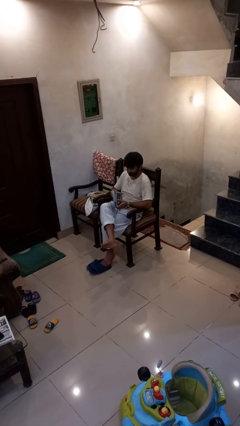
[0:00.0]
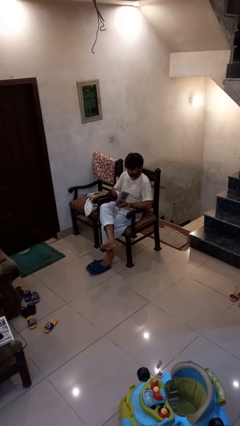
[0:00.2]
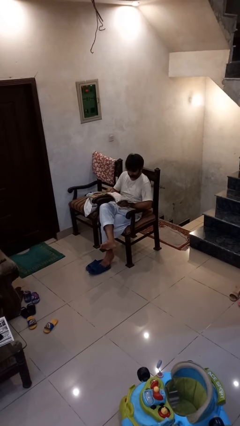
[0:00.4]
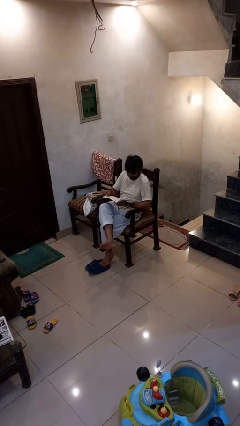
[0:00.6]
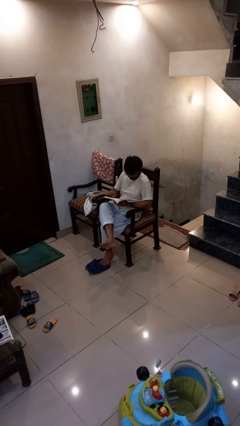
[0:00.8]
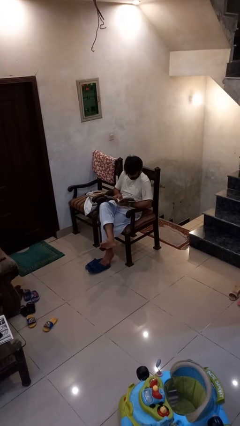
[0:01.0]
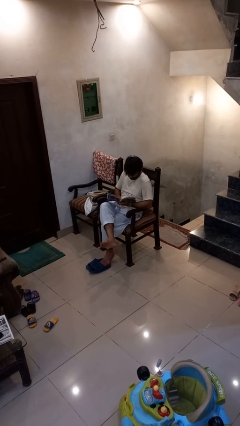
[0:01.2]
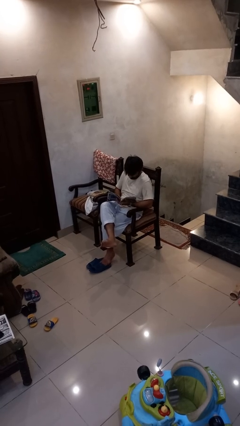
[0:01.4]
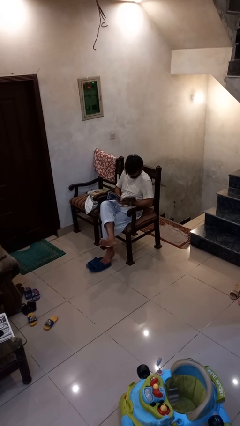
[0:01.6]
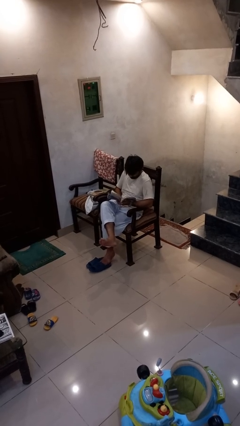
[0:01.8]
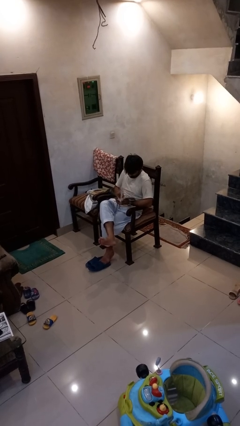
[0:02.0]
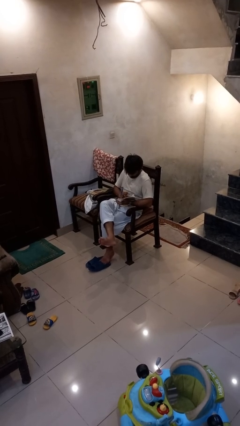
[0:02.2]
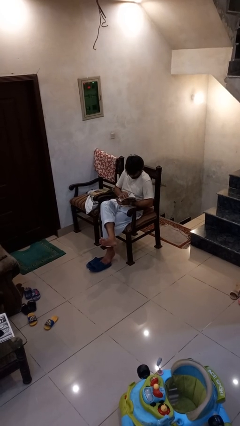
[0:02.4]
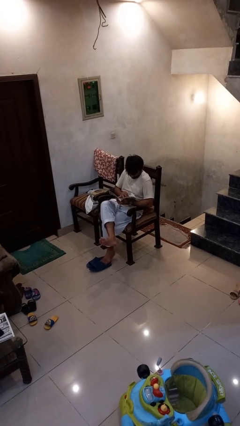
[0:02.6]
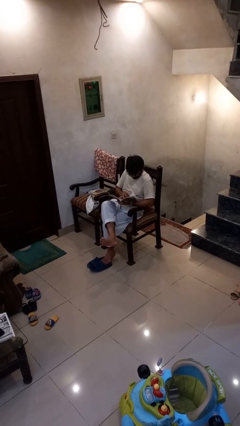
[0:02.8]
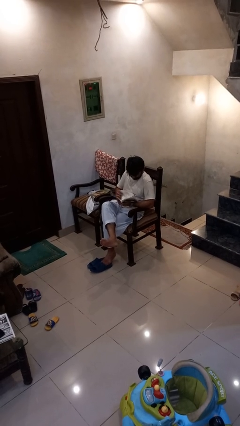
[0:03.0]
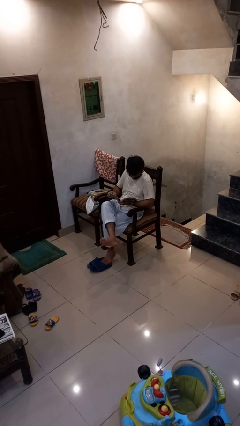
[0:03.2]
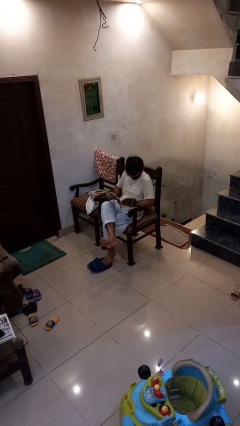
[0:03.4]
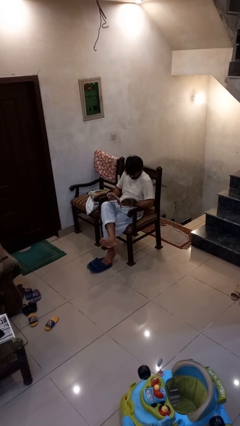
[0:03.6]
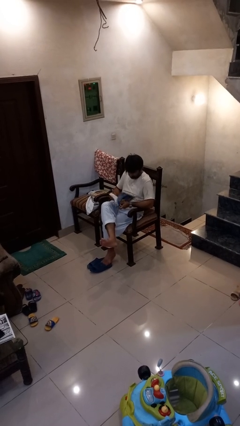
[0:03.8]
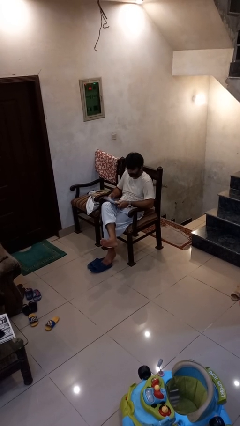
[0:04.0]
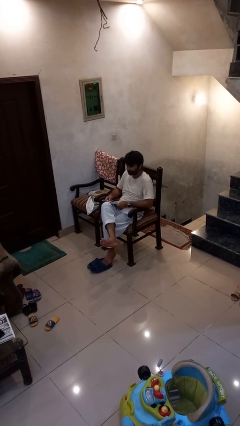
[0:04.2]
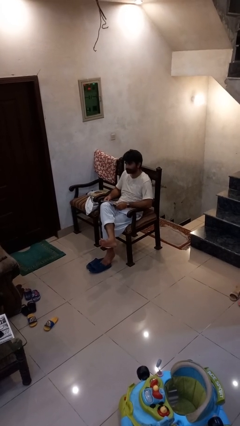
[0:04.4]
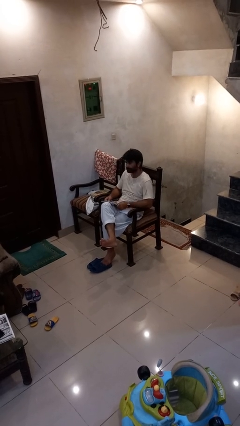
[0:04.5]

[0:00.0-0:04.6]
person reads book

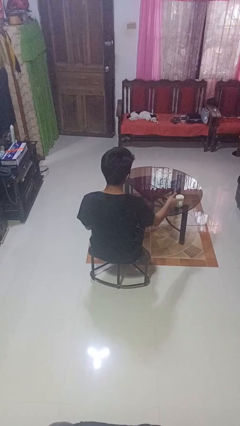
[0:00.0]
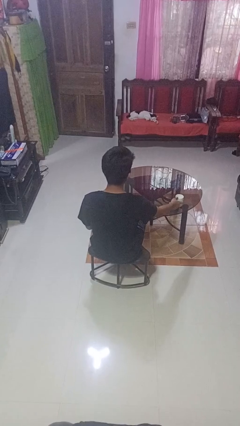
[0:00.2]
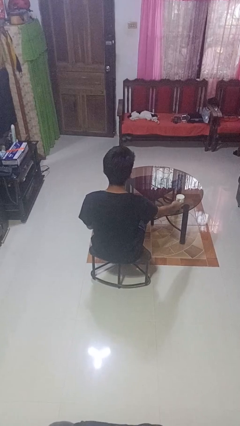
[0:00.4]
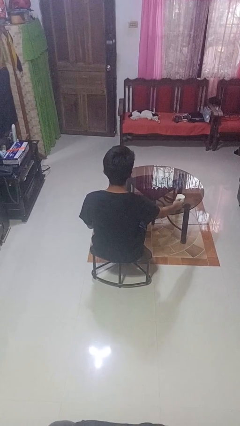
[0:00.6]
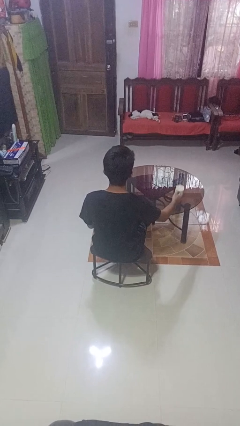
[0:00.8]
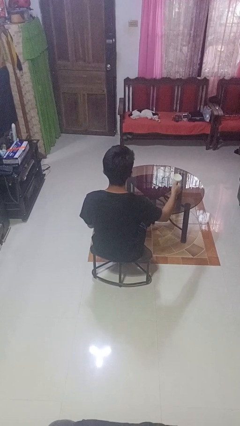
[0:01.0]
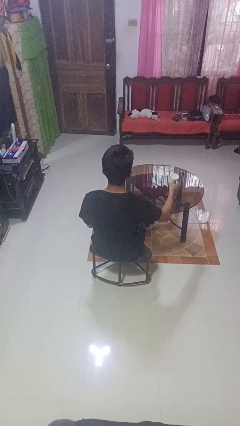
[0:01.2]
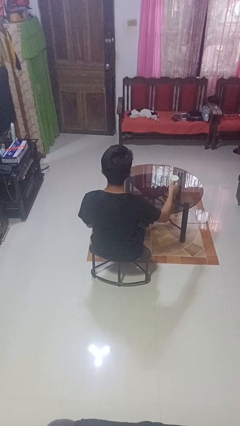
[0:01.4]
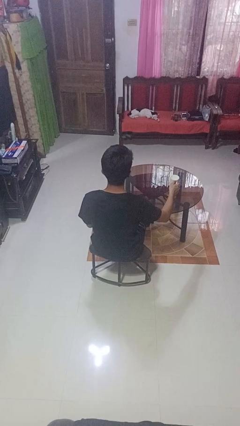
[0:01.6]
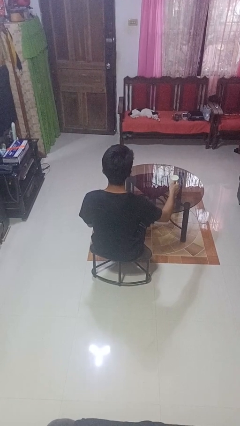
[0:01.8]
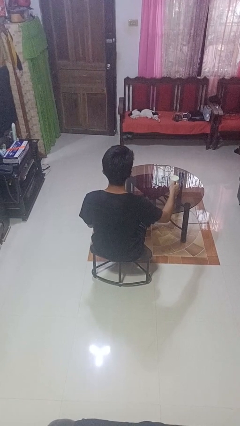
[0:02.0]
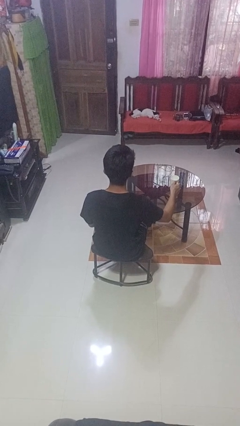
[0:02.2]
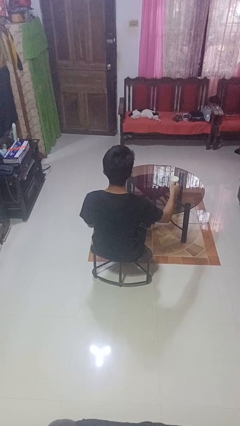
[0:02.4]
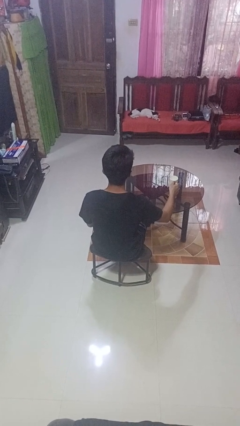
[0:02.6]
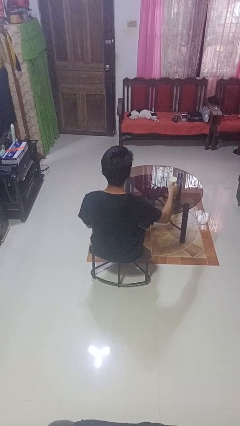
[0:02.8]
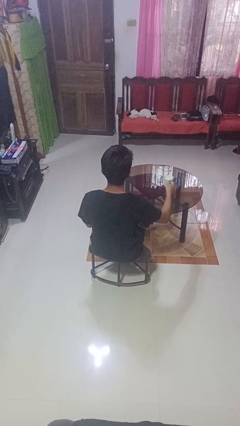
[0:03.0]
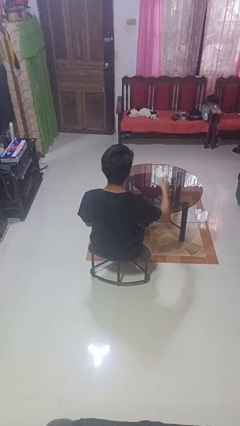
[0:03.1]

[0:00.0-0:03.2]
person picks up object from table

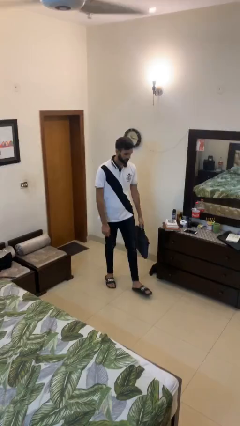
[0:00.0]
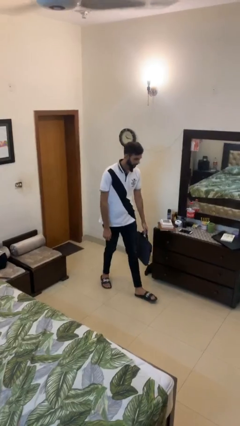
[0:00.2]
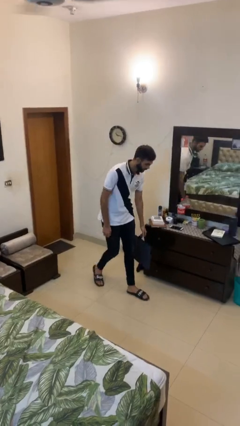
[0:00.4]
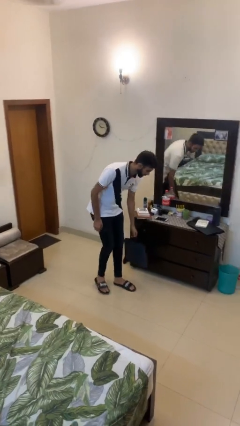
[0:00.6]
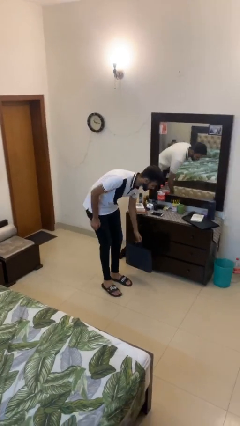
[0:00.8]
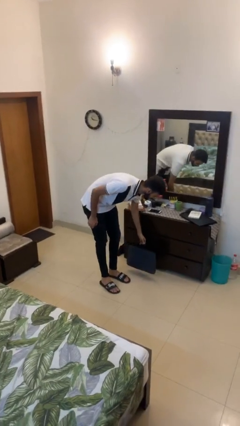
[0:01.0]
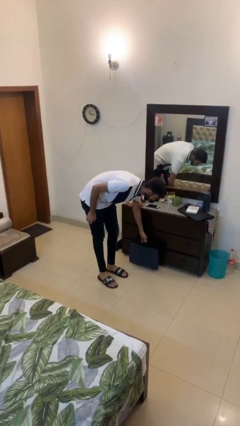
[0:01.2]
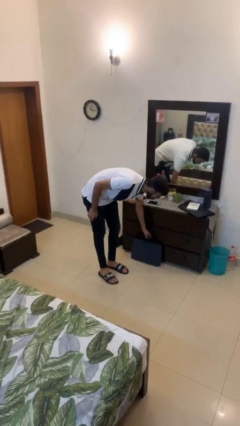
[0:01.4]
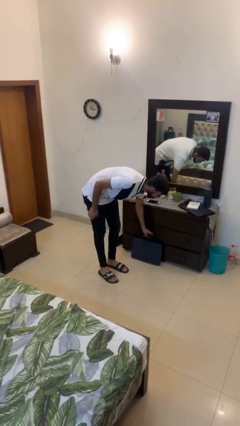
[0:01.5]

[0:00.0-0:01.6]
person puts down object on floor

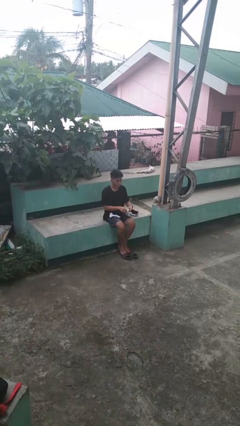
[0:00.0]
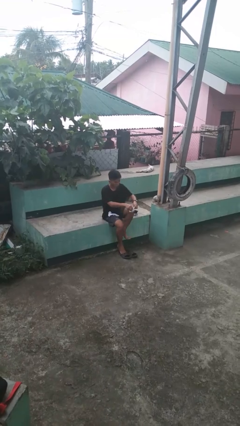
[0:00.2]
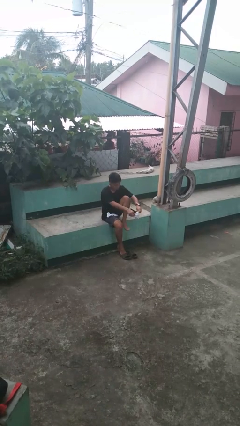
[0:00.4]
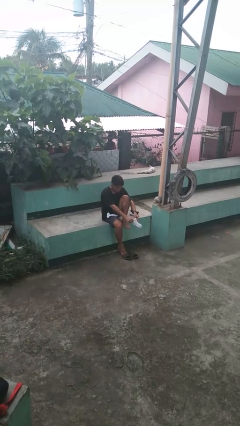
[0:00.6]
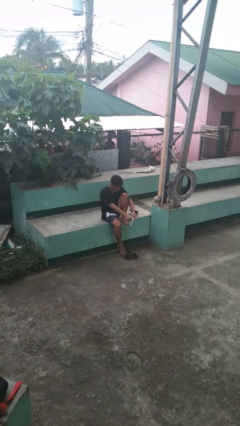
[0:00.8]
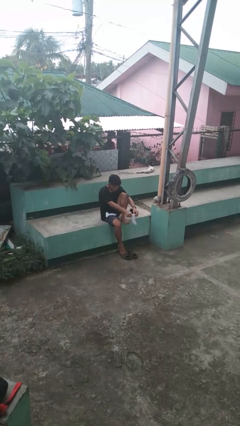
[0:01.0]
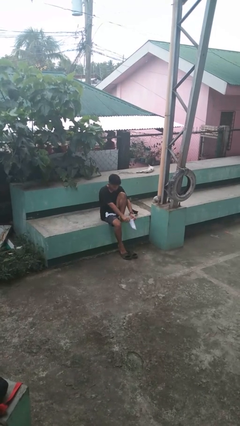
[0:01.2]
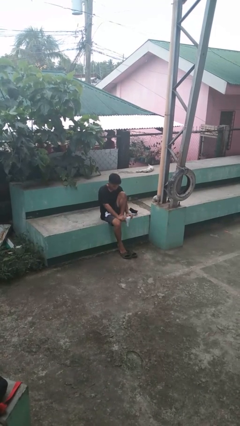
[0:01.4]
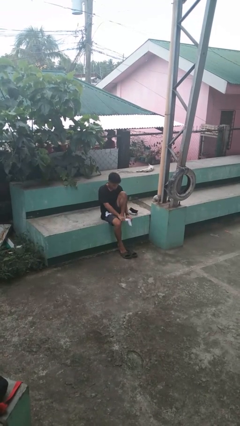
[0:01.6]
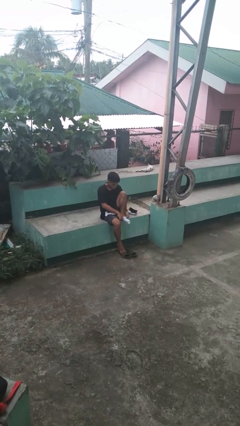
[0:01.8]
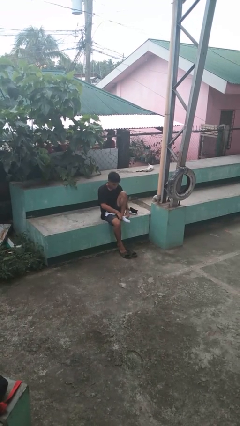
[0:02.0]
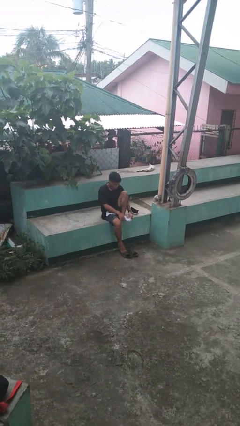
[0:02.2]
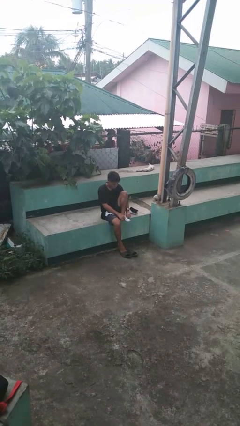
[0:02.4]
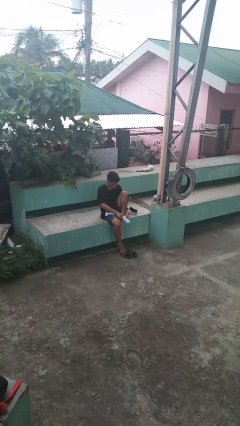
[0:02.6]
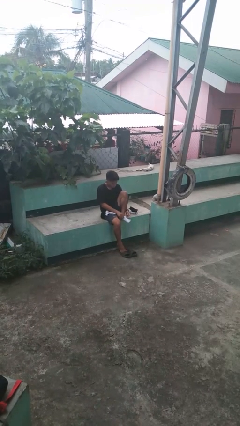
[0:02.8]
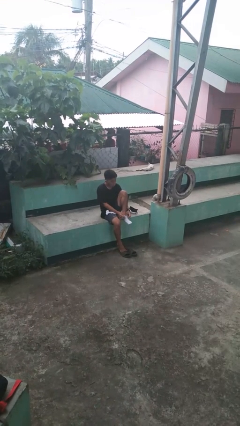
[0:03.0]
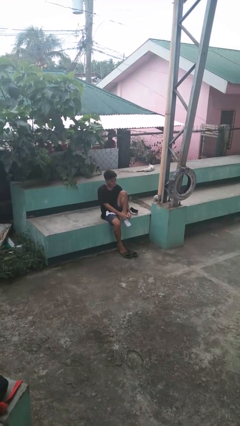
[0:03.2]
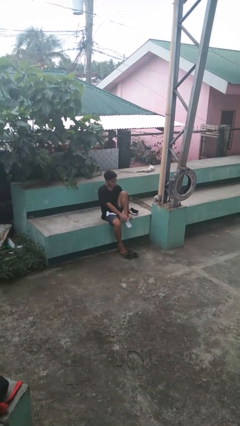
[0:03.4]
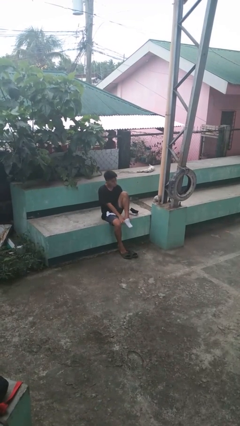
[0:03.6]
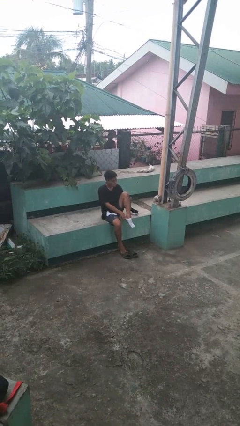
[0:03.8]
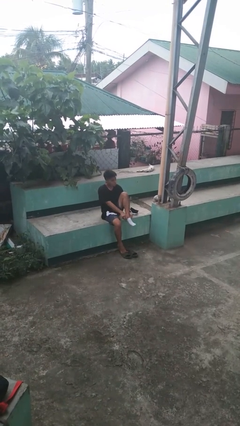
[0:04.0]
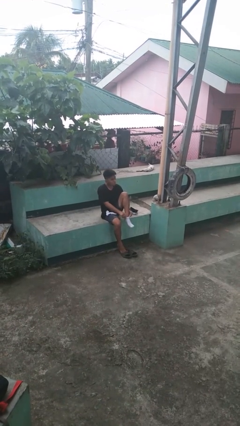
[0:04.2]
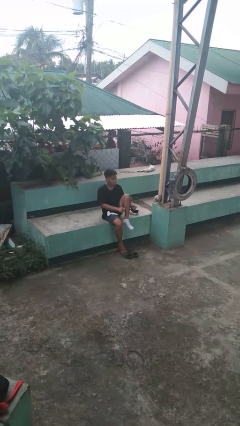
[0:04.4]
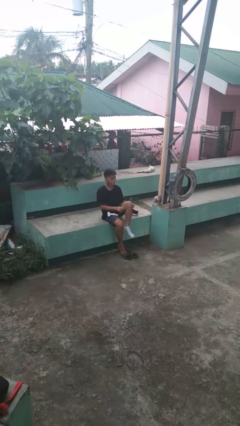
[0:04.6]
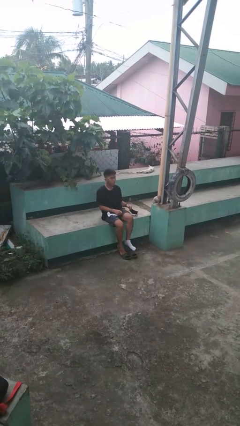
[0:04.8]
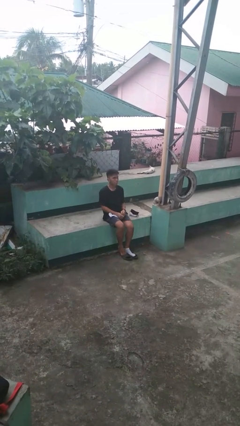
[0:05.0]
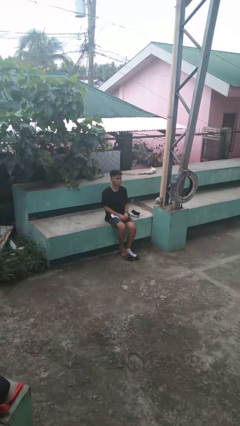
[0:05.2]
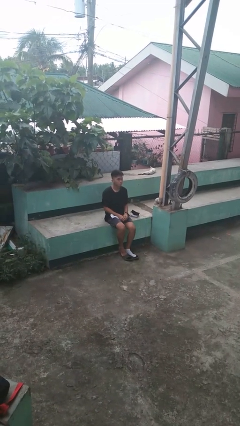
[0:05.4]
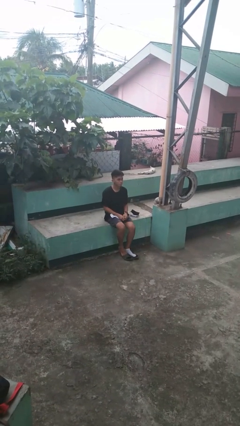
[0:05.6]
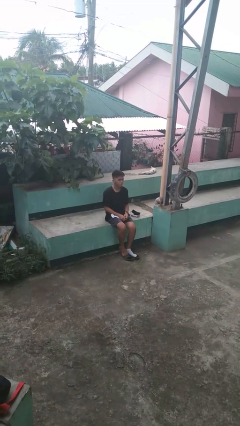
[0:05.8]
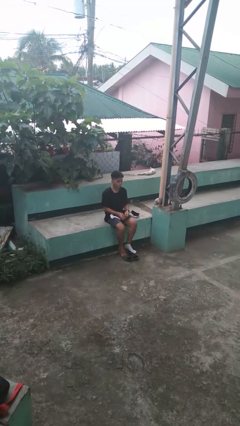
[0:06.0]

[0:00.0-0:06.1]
person puts on socks

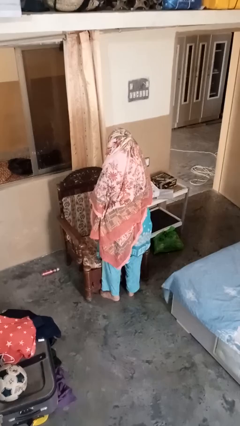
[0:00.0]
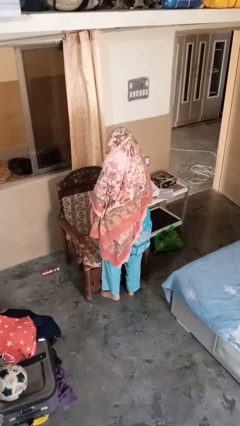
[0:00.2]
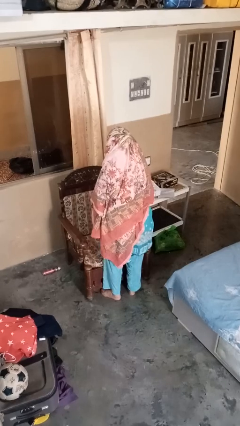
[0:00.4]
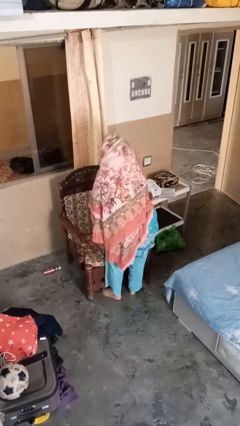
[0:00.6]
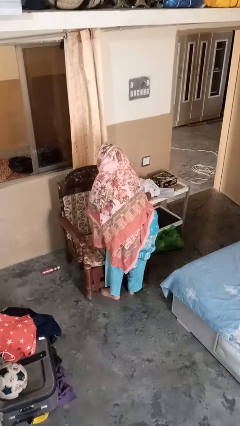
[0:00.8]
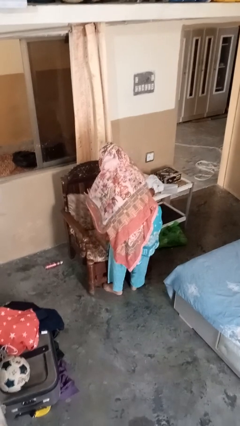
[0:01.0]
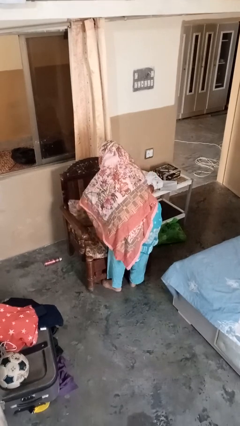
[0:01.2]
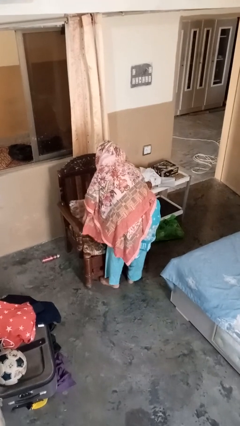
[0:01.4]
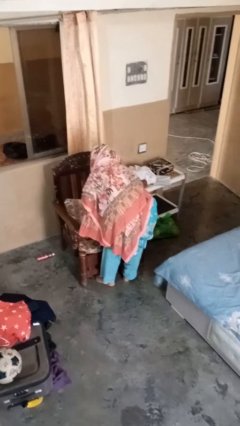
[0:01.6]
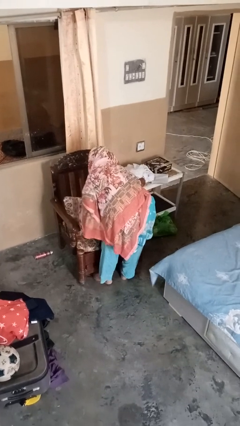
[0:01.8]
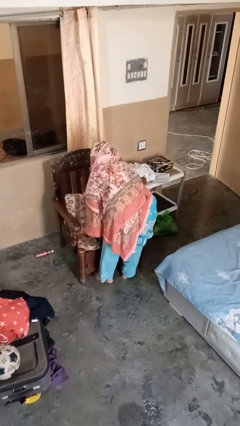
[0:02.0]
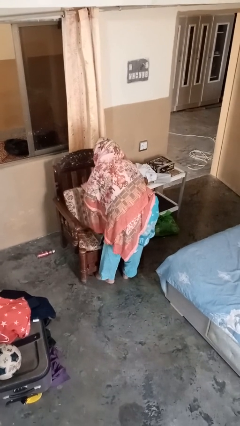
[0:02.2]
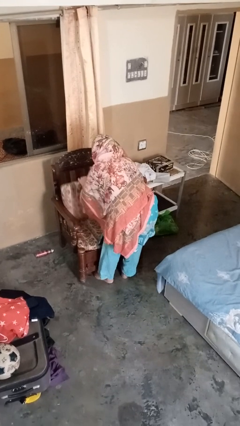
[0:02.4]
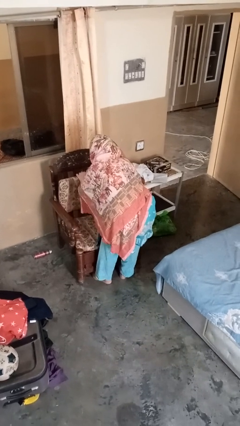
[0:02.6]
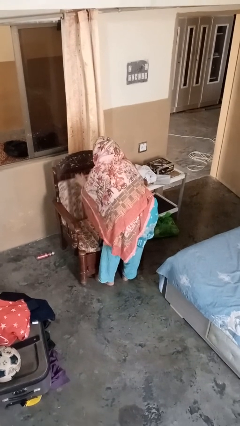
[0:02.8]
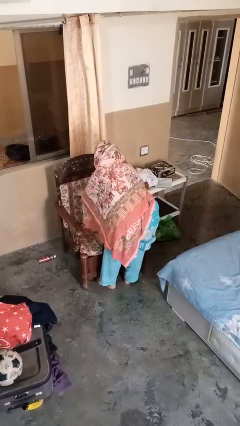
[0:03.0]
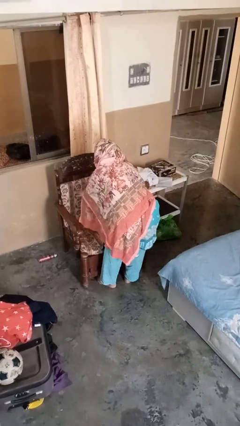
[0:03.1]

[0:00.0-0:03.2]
person searches in couch
